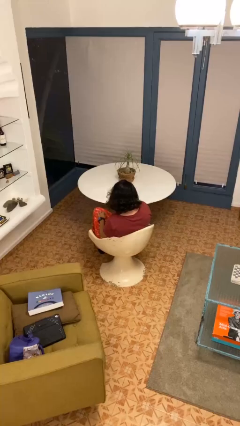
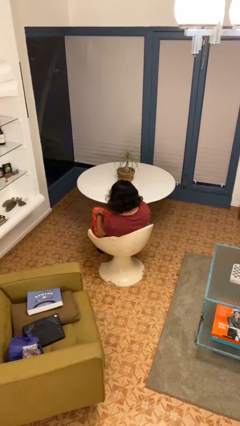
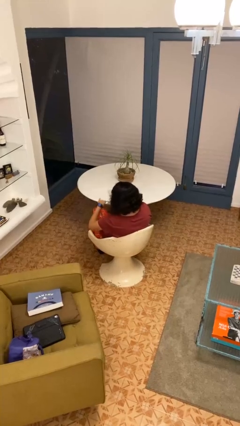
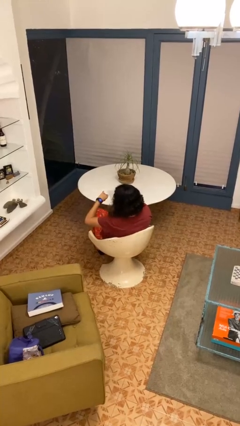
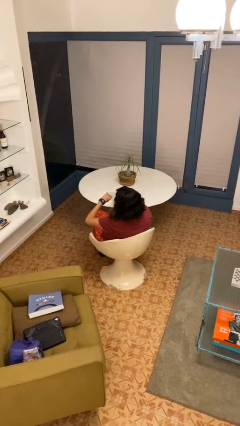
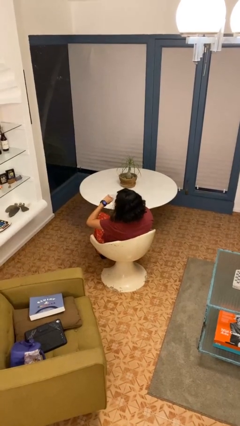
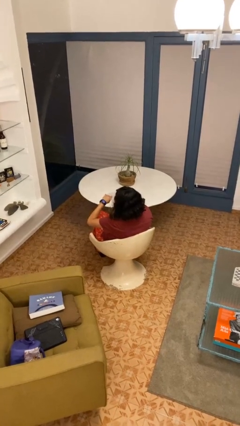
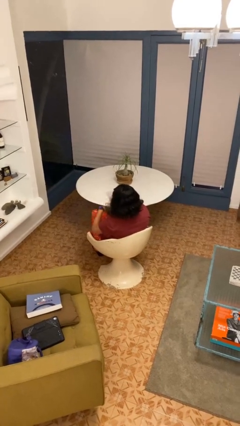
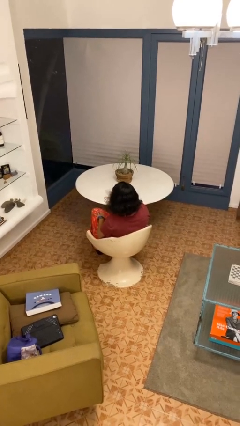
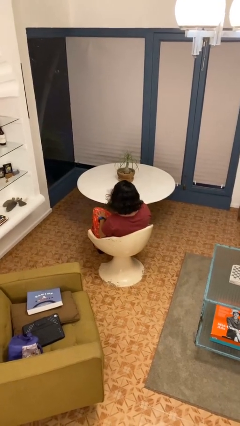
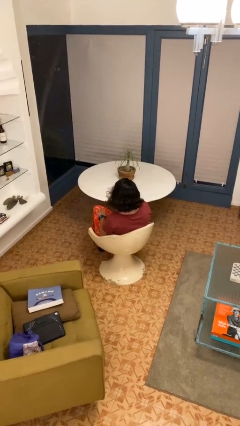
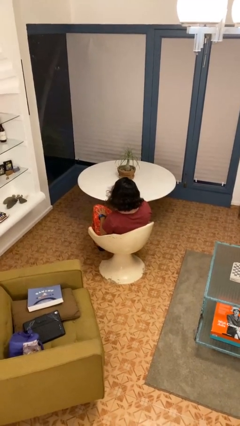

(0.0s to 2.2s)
person looks at wristwatch

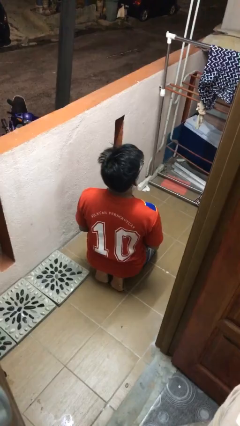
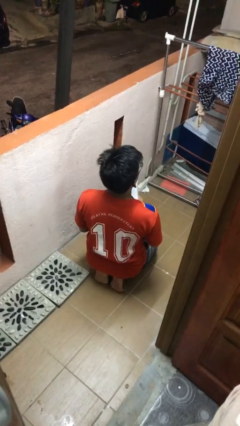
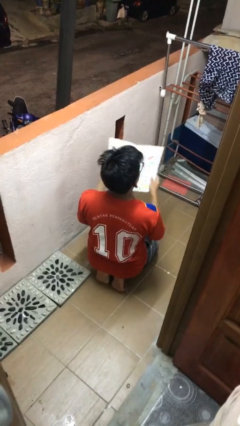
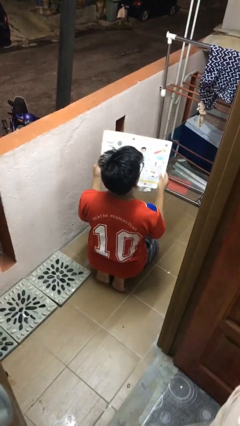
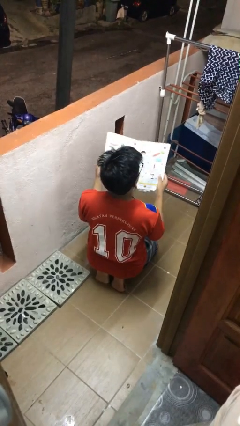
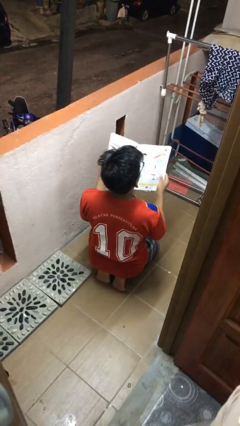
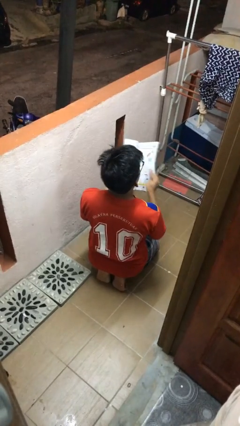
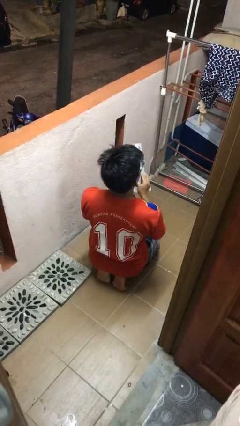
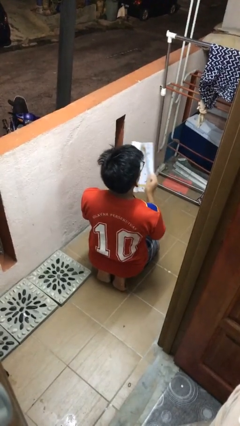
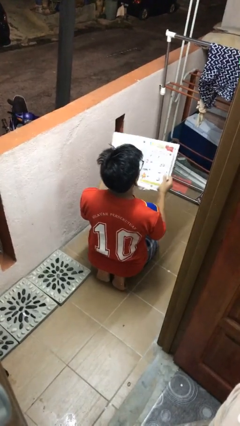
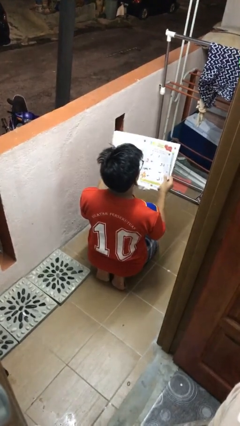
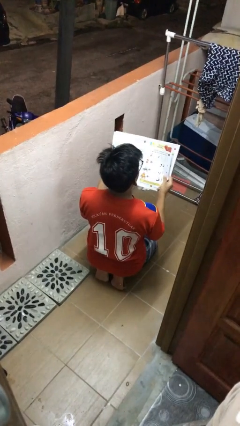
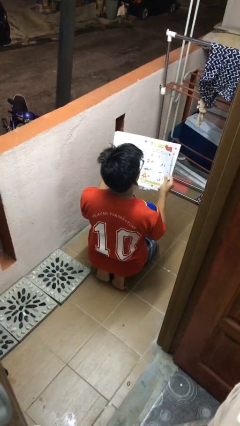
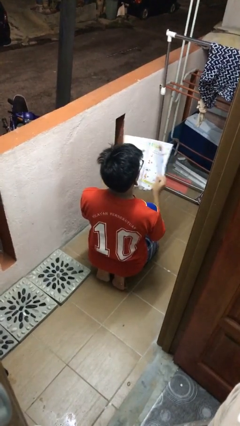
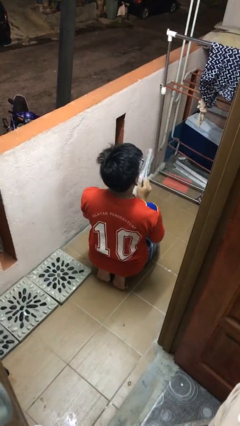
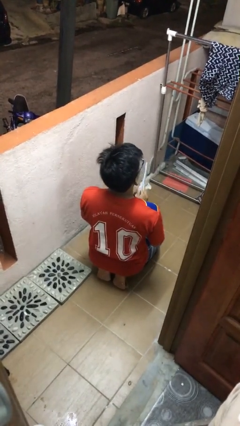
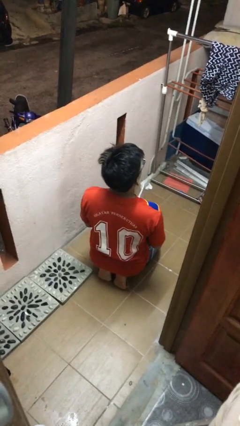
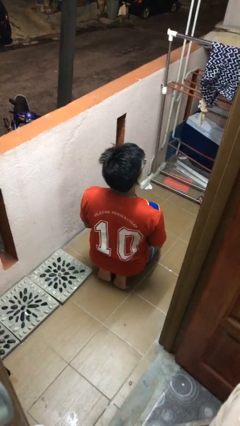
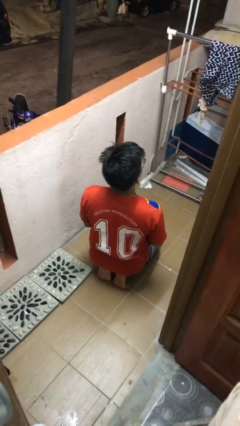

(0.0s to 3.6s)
person reads magazine

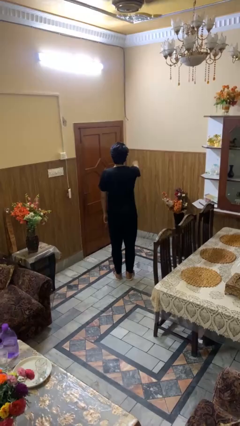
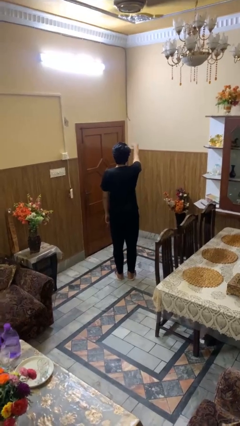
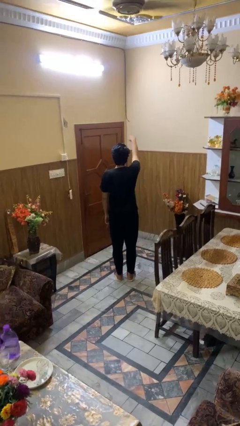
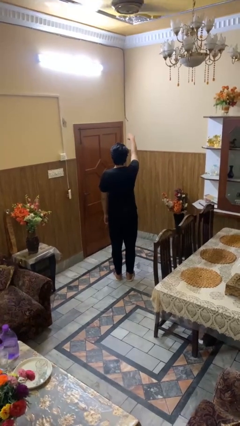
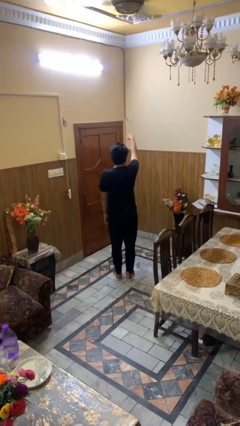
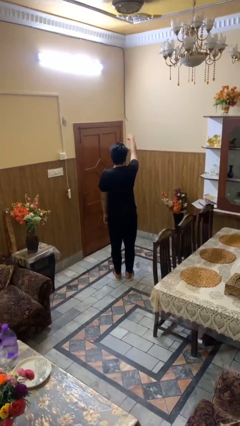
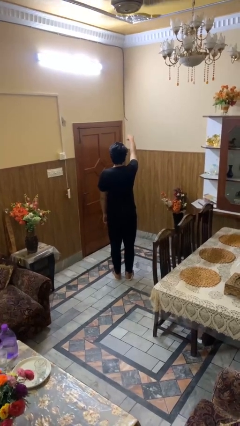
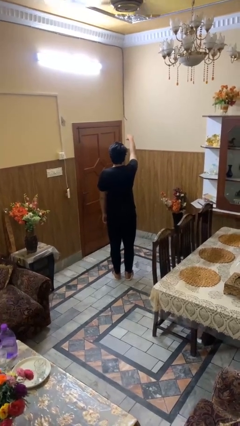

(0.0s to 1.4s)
person gestures swipe up

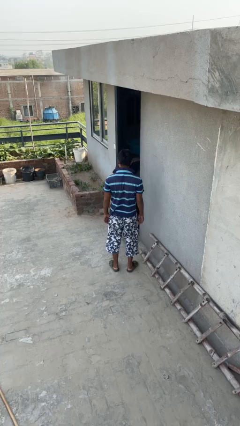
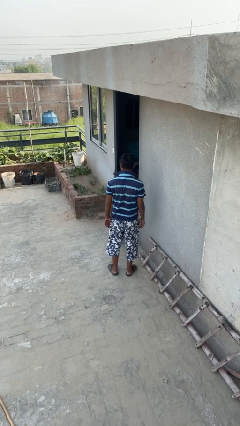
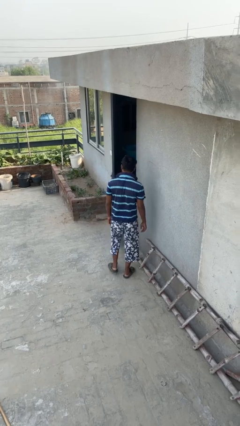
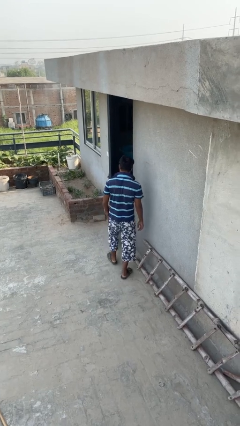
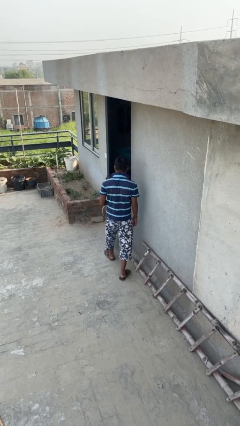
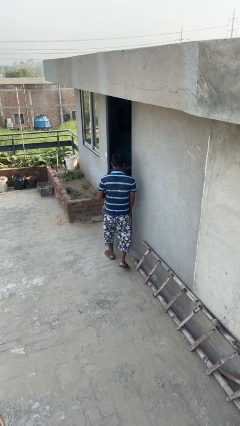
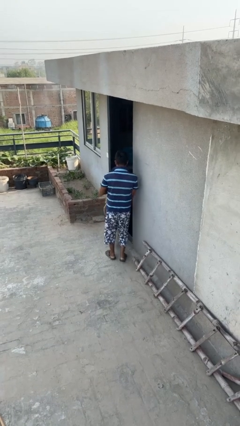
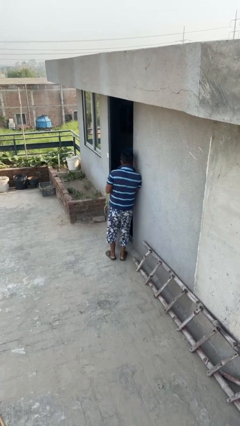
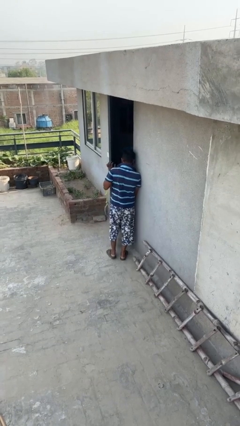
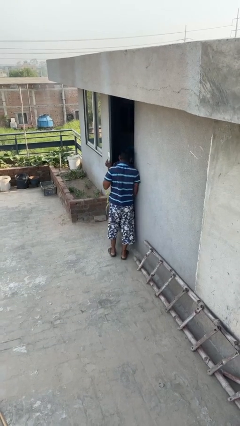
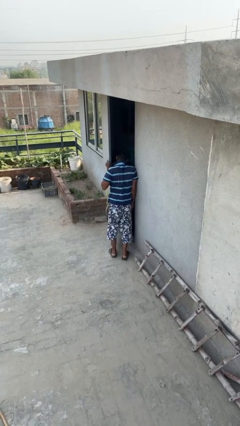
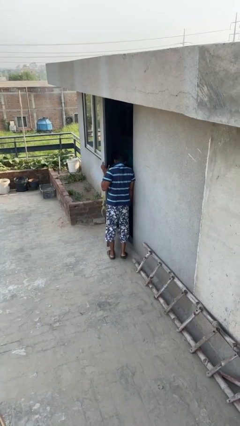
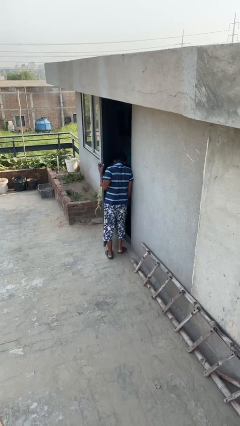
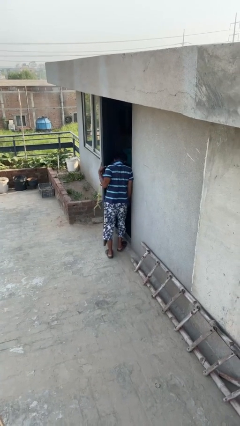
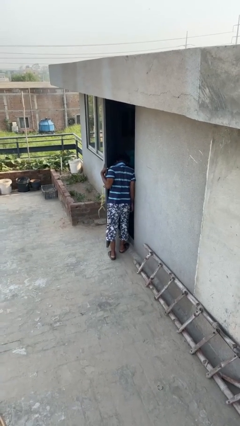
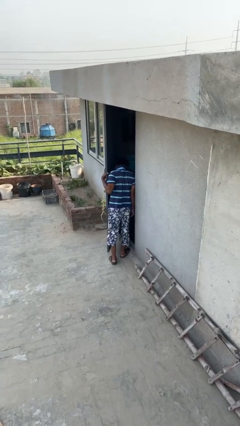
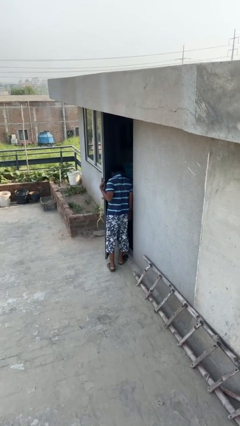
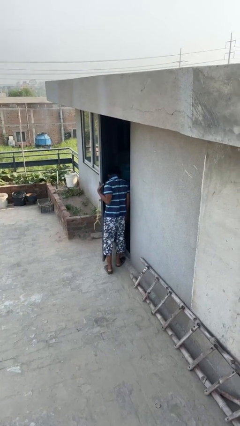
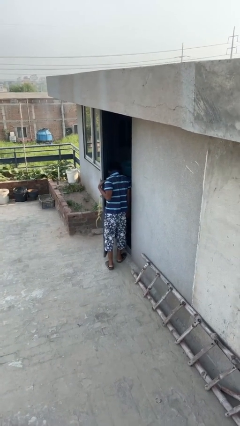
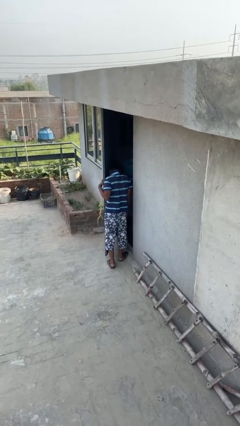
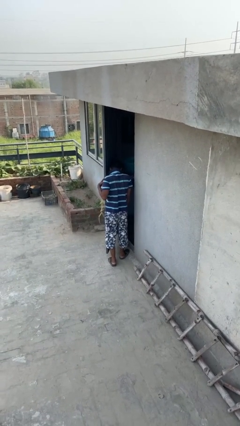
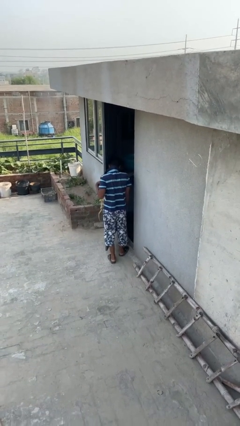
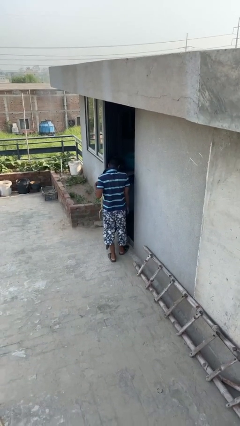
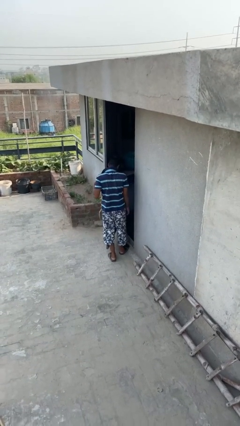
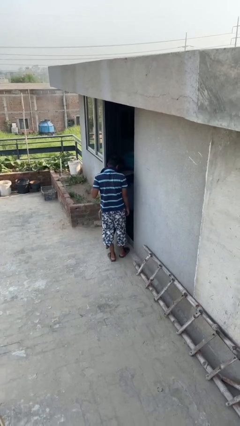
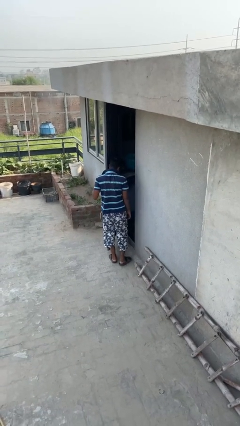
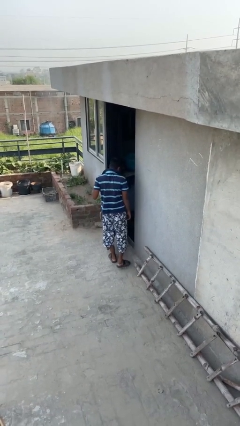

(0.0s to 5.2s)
person bumps into wall

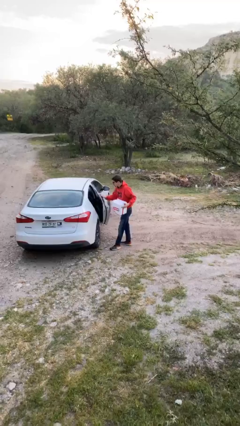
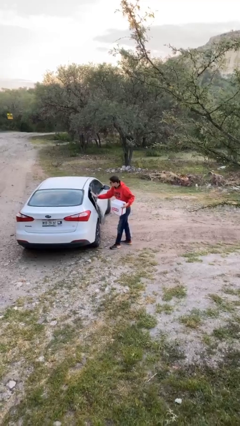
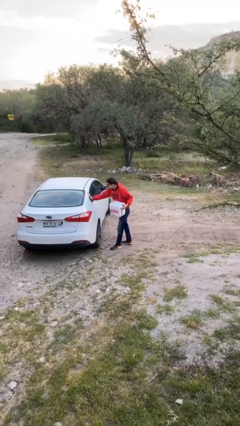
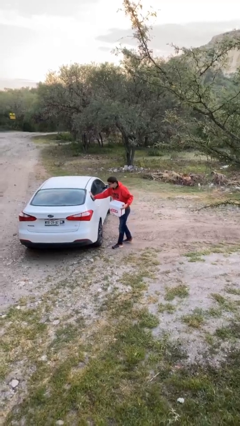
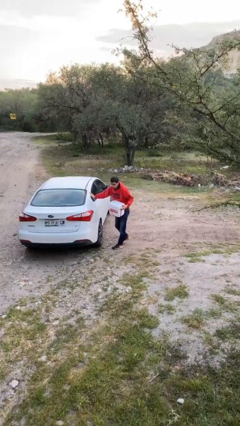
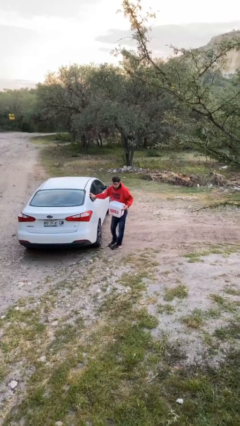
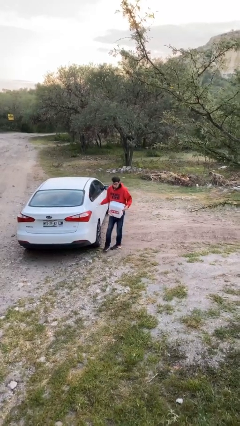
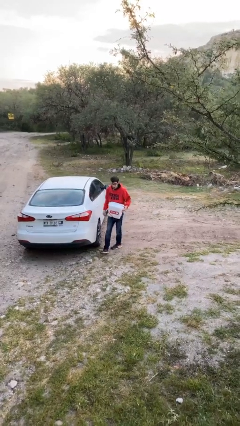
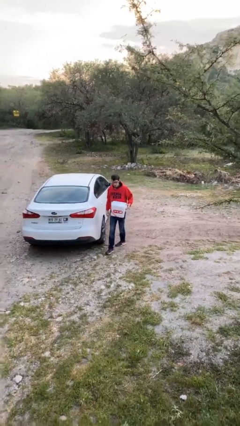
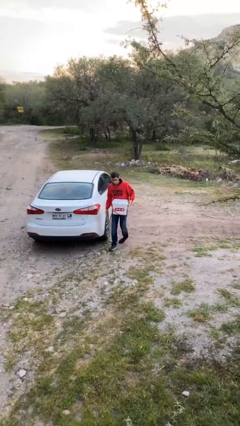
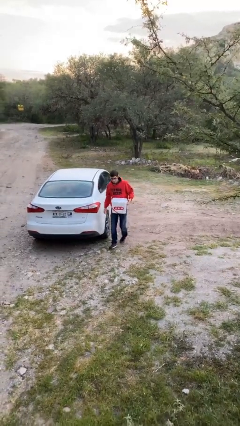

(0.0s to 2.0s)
person closes car door

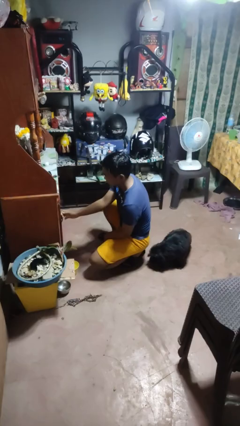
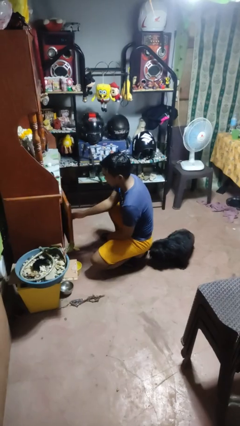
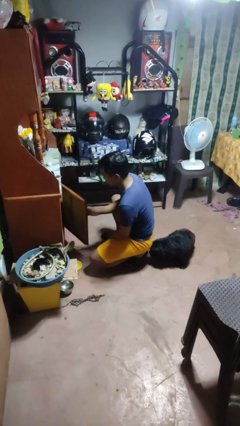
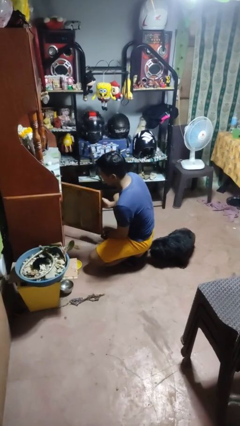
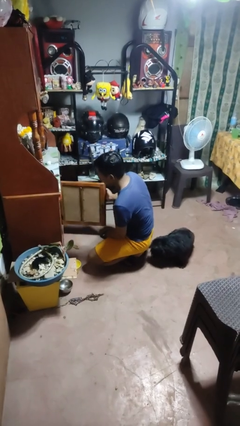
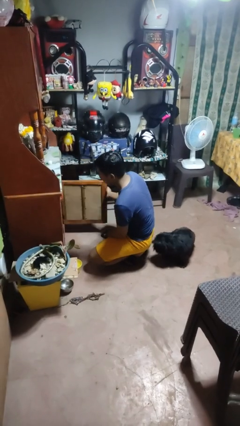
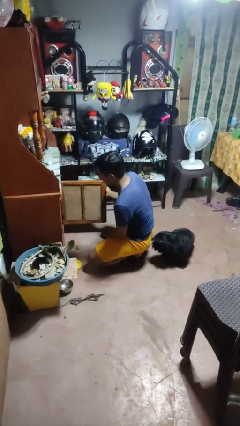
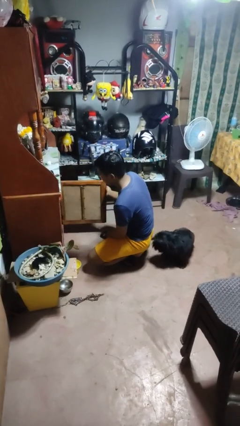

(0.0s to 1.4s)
person opens cabinet

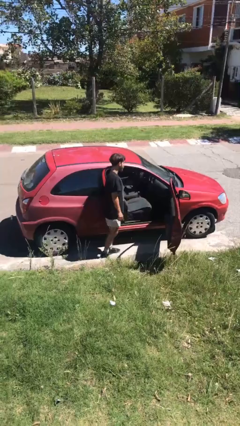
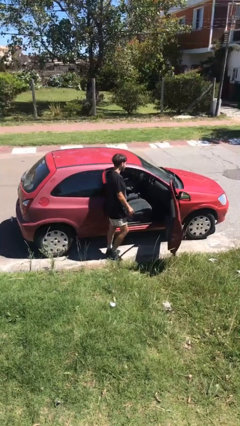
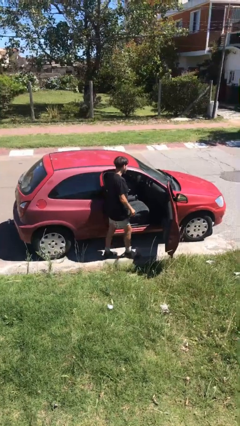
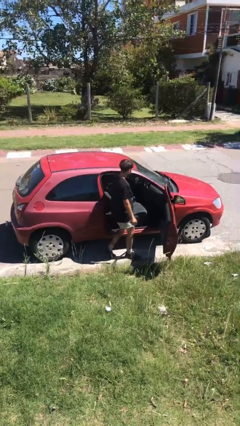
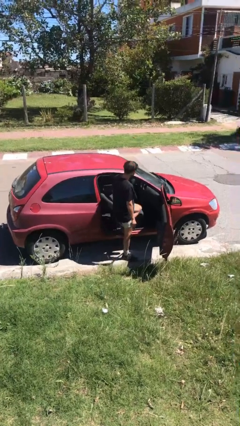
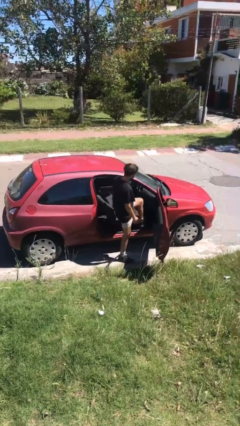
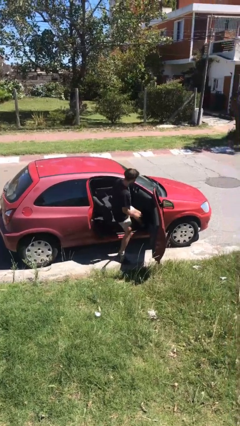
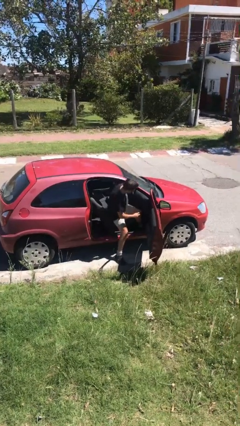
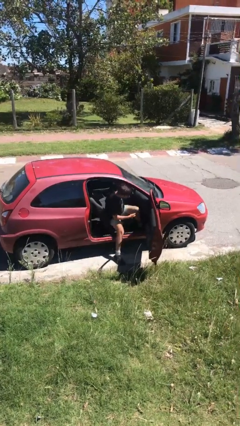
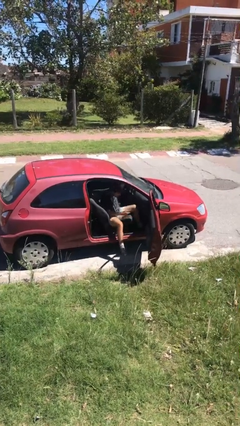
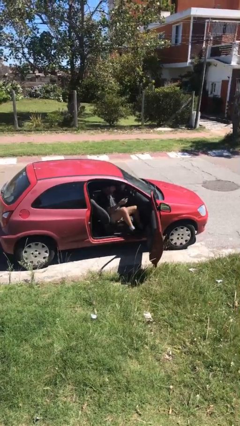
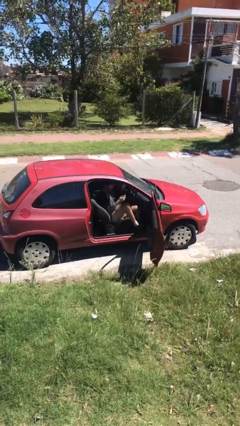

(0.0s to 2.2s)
person enters car
